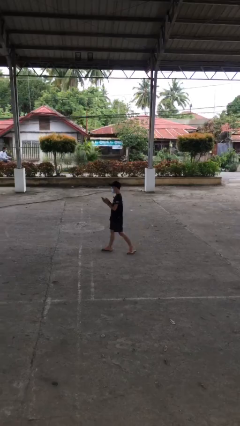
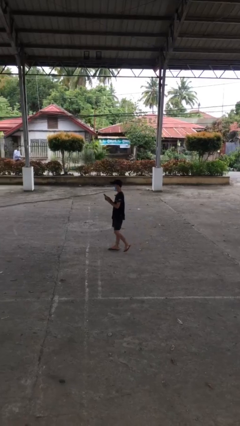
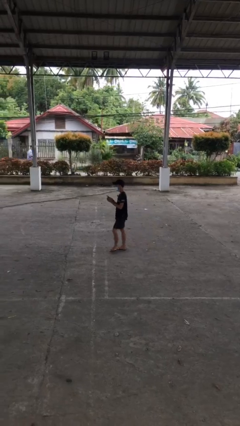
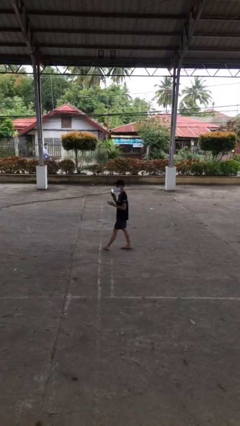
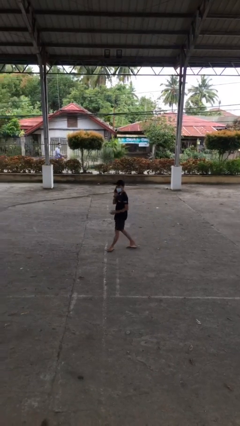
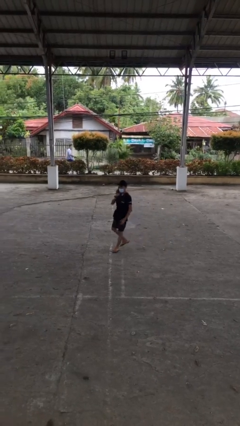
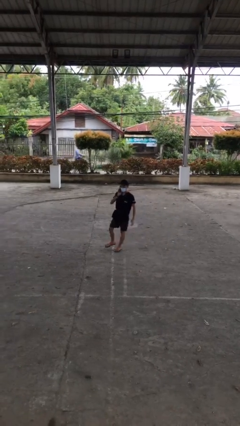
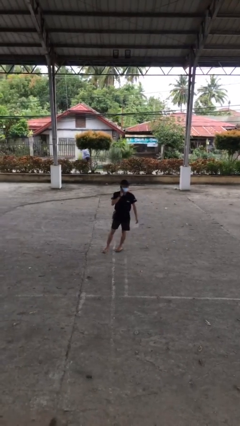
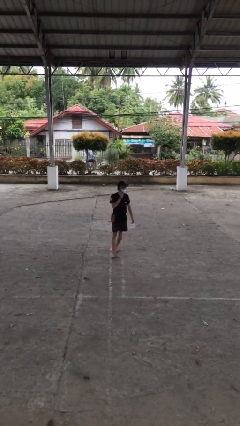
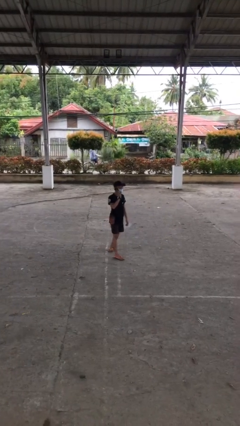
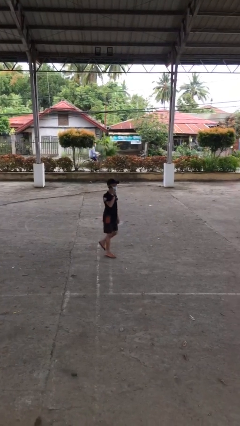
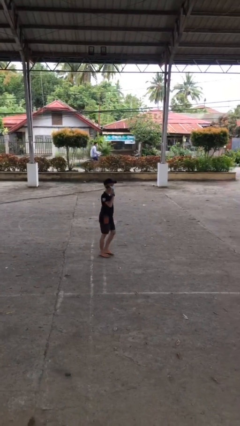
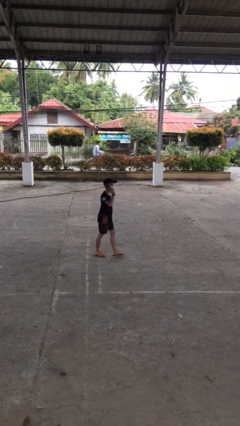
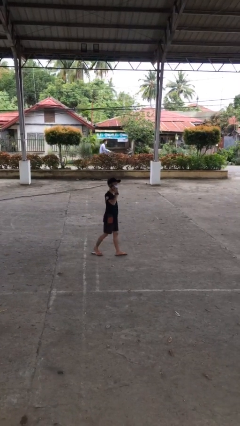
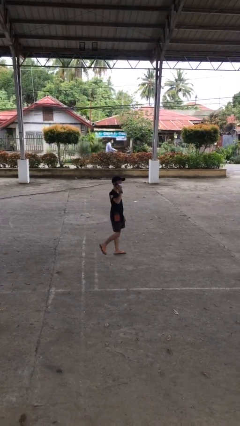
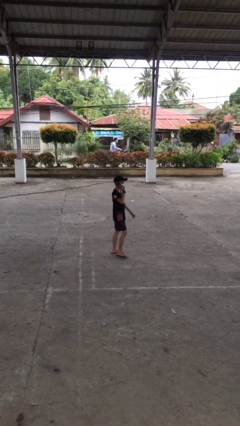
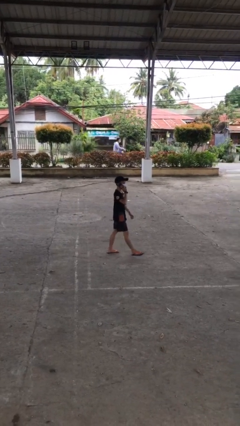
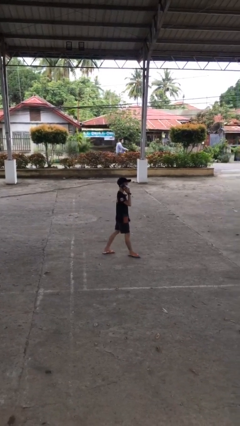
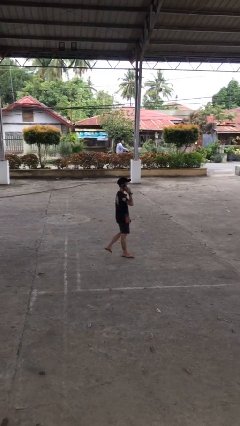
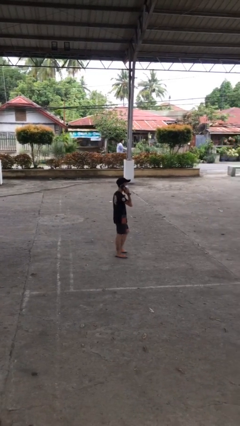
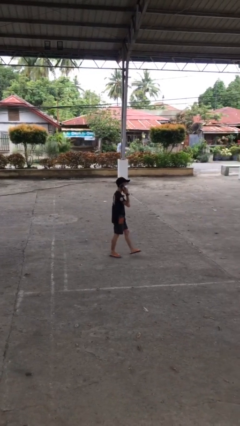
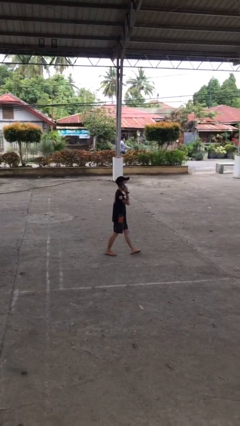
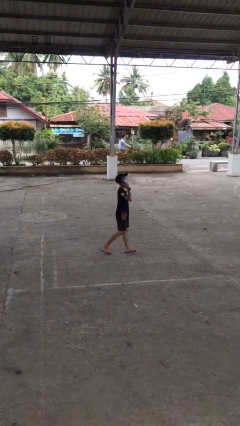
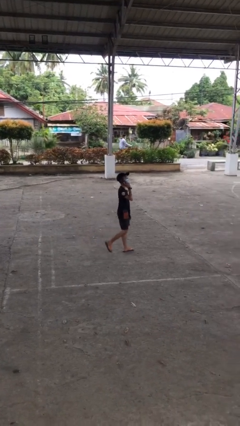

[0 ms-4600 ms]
person talks on phone

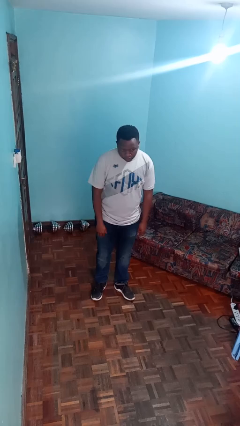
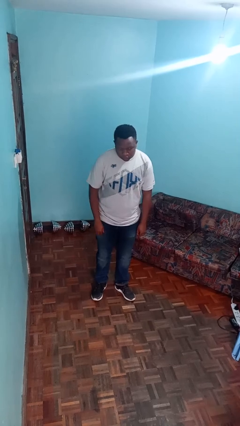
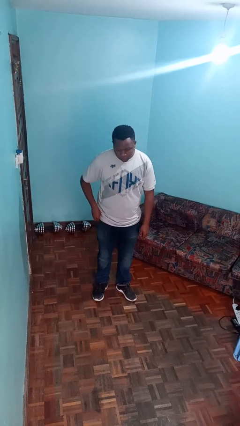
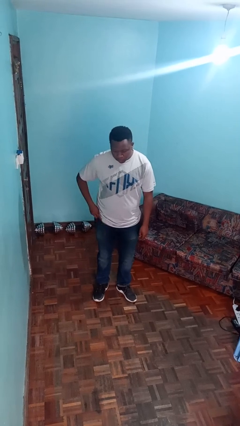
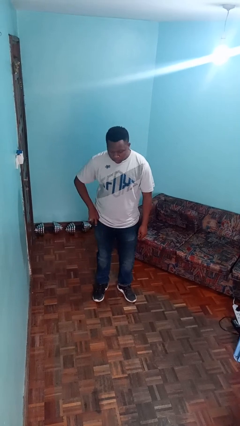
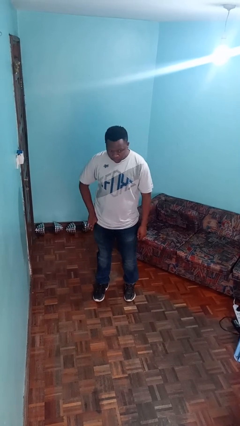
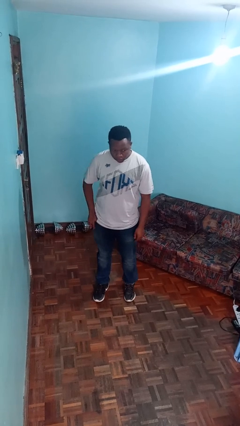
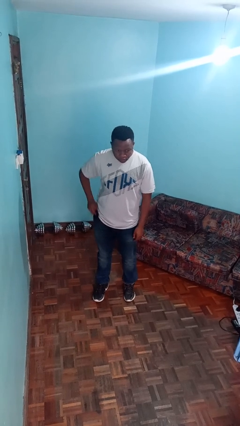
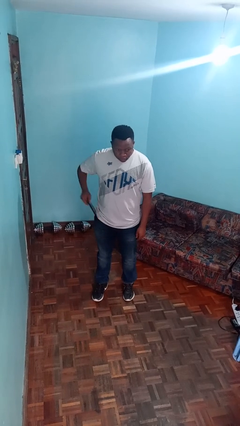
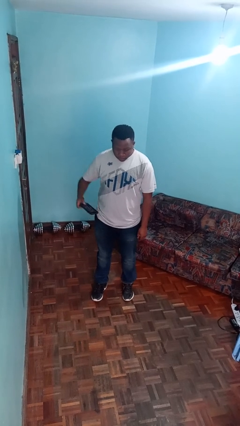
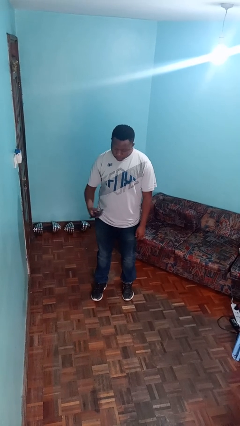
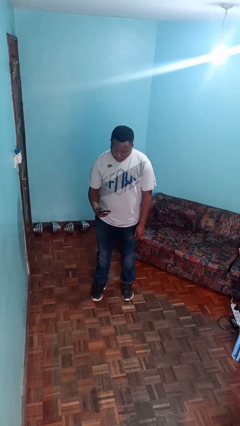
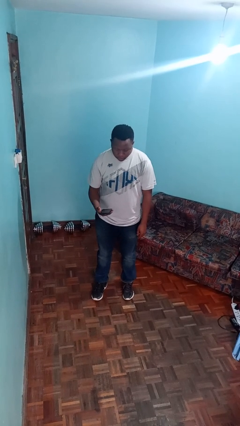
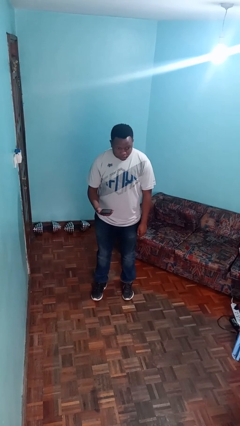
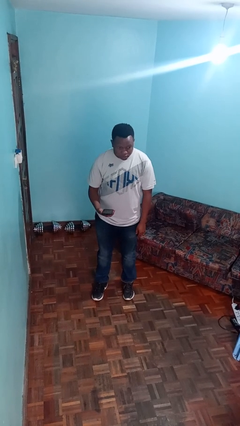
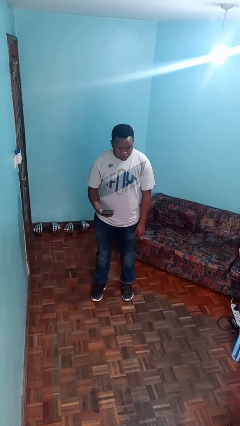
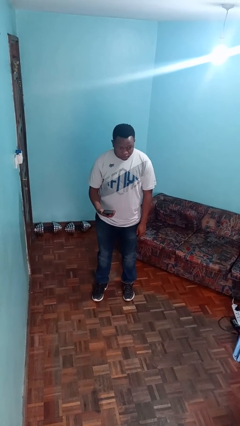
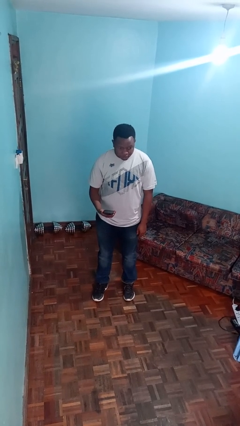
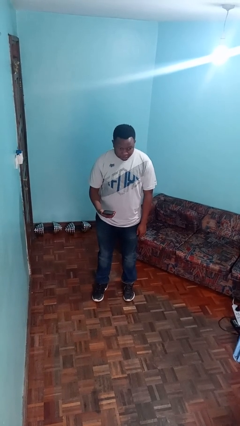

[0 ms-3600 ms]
person takes phone from pocket

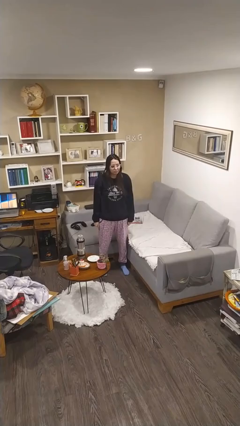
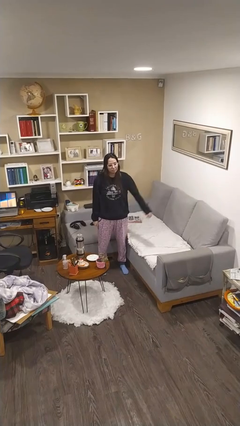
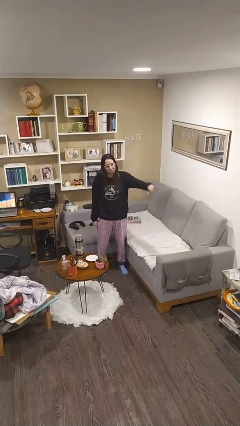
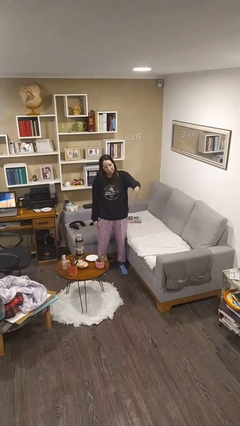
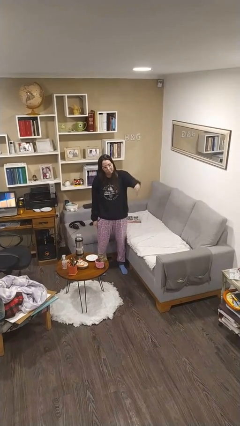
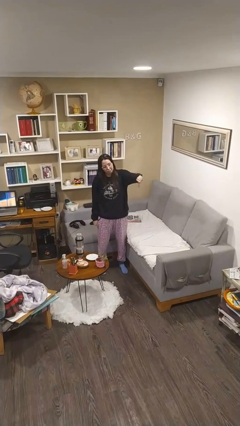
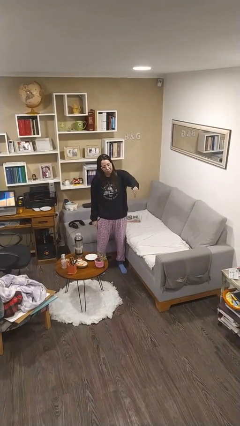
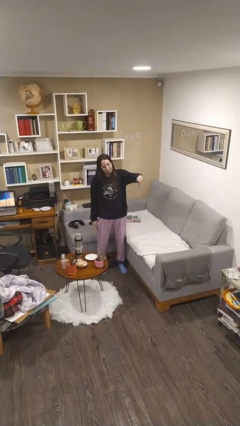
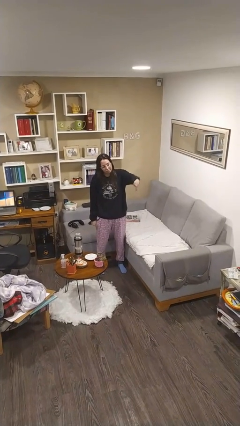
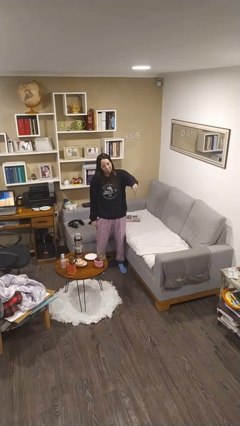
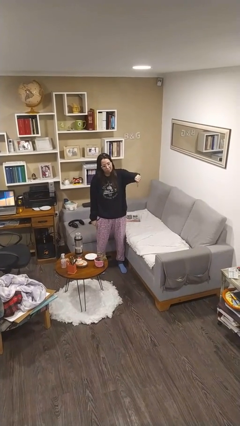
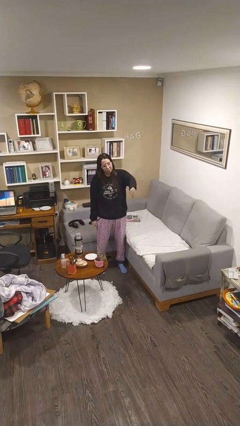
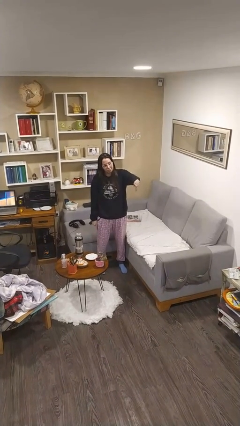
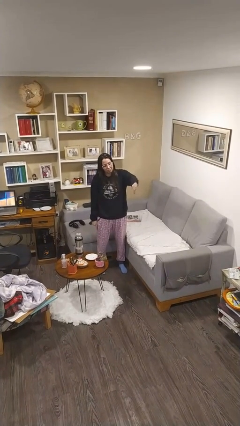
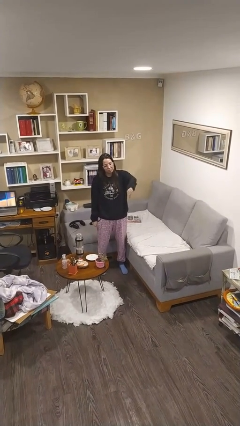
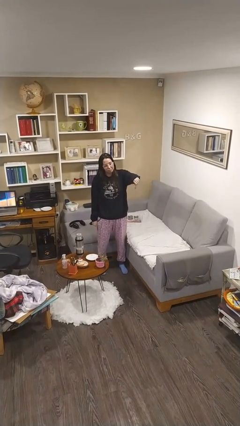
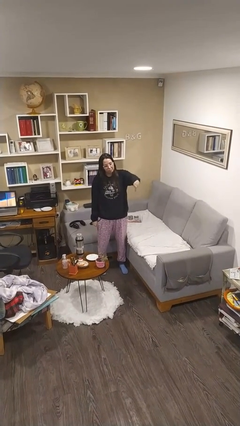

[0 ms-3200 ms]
person gestures thumbs down

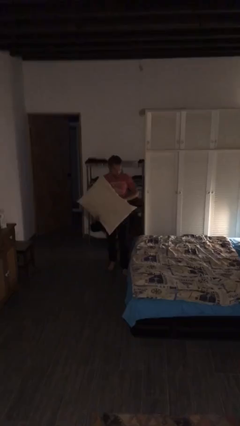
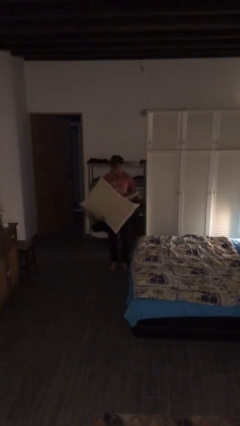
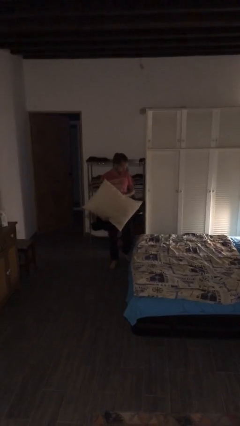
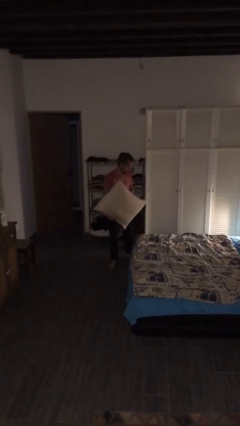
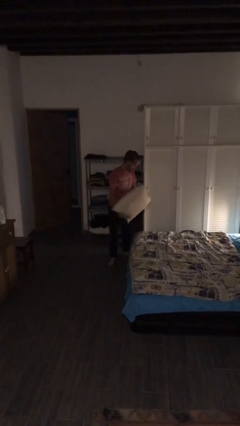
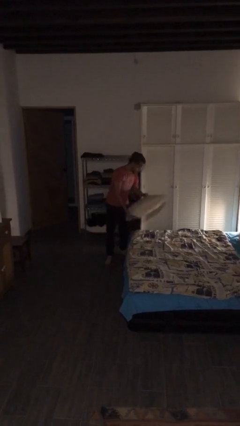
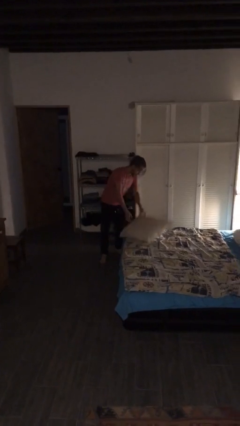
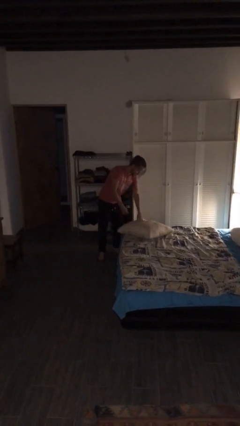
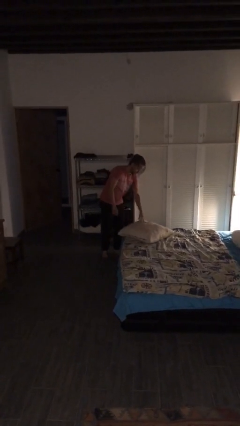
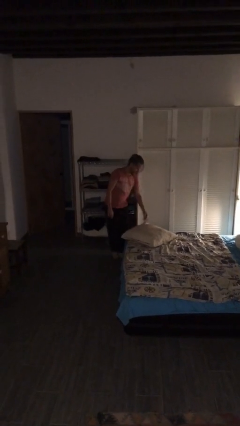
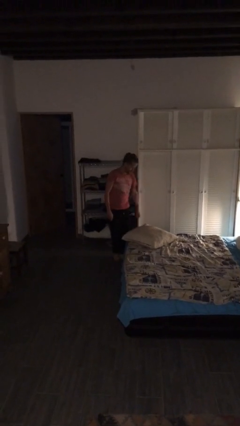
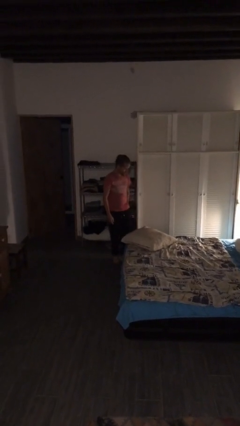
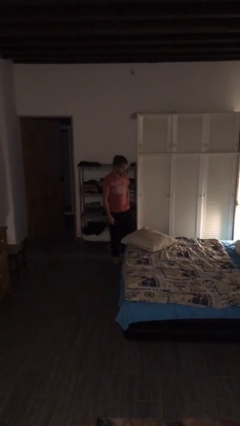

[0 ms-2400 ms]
person puts down object on bed

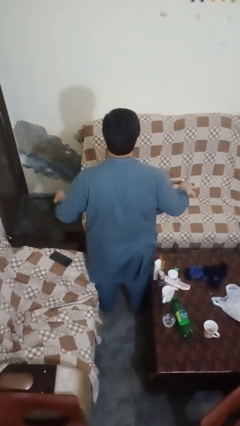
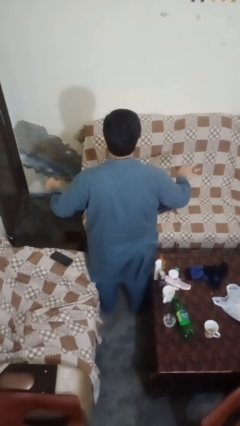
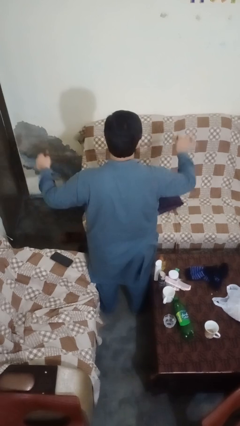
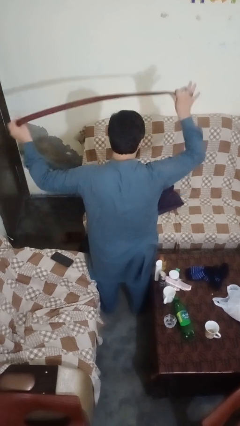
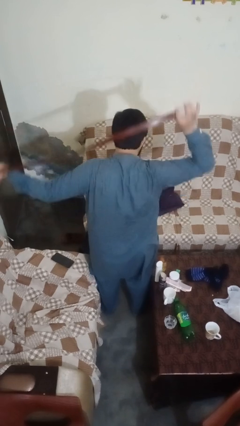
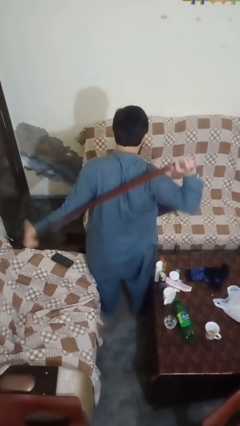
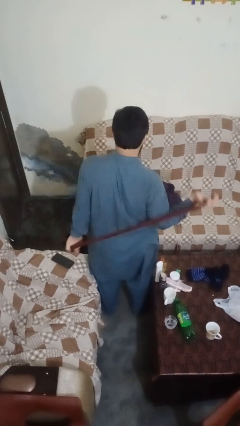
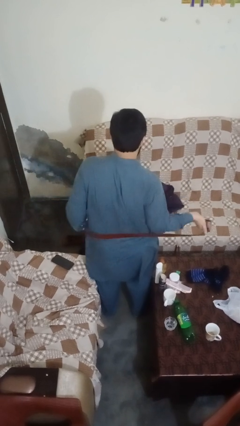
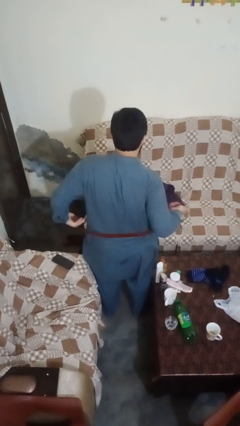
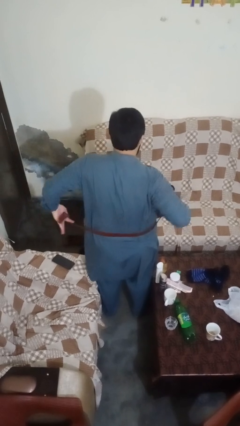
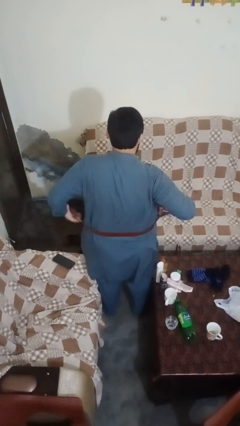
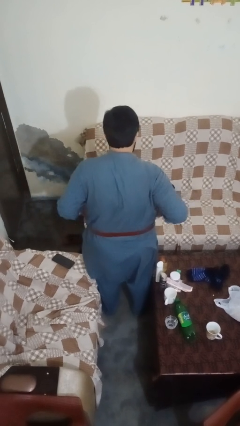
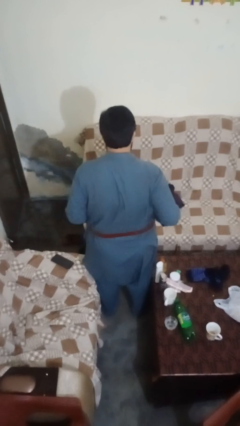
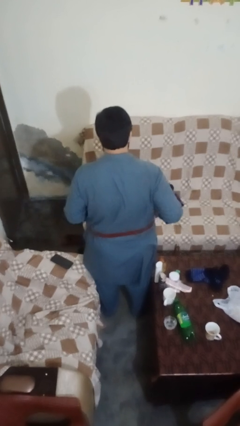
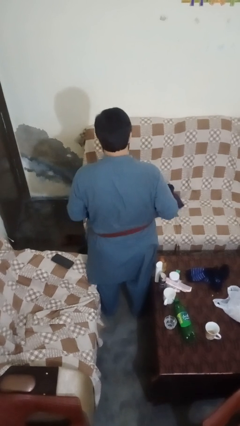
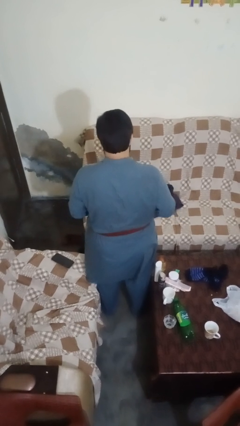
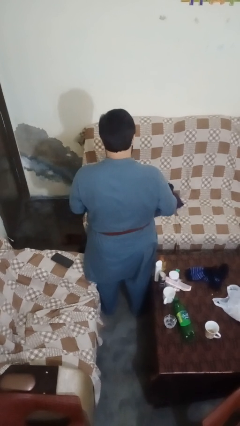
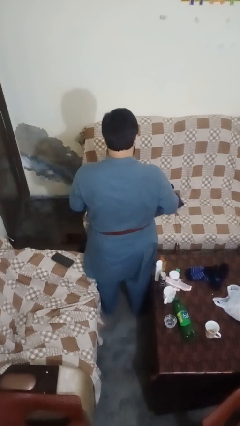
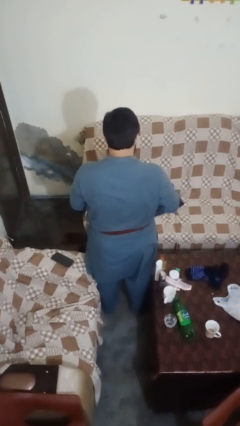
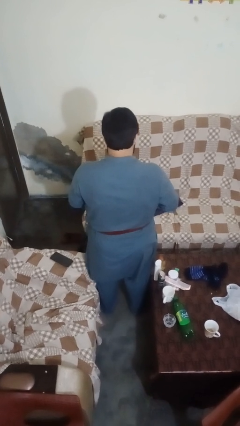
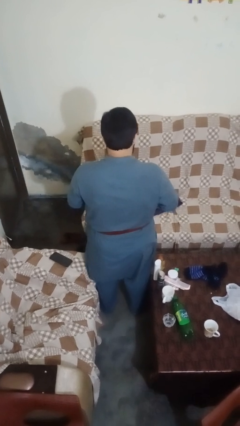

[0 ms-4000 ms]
person puts on belt
